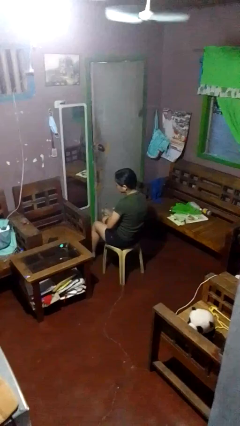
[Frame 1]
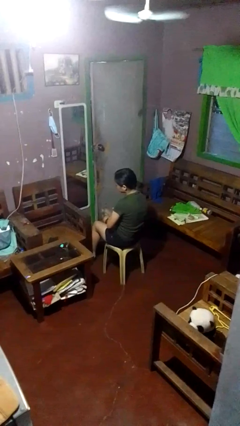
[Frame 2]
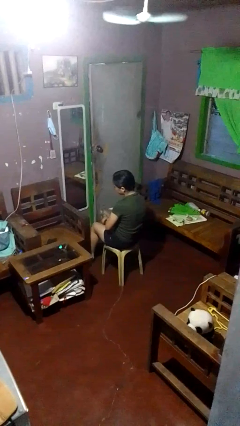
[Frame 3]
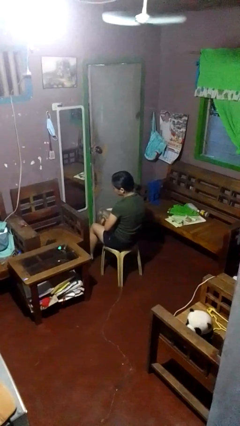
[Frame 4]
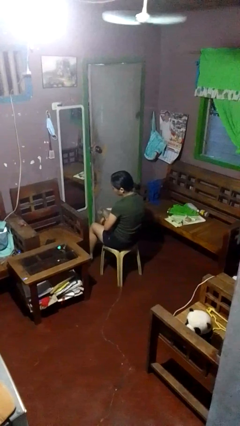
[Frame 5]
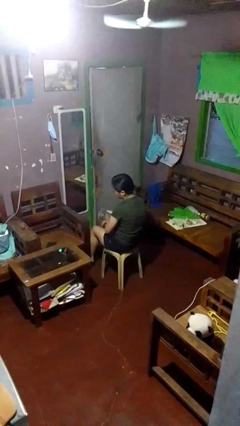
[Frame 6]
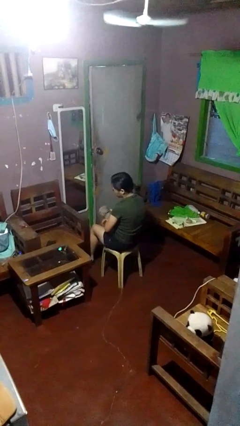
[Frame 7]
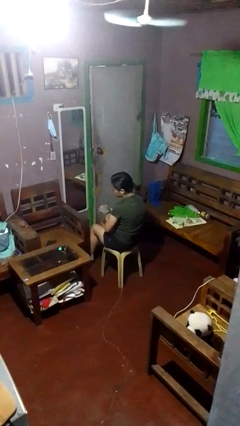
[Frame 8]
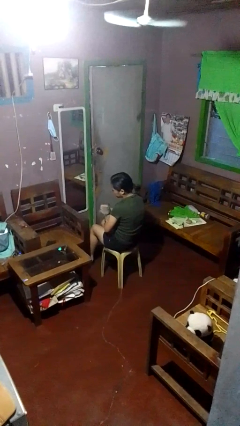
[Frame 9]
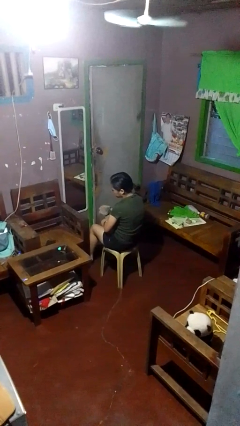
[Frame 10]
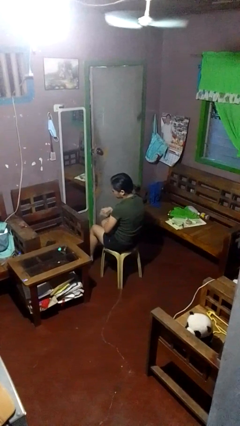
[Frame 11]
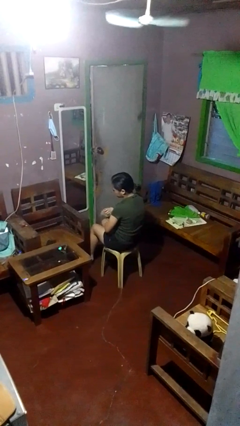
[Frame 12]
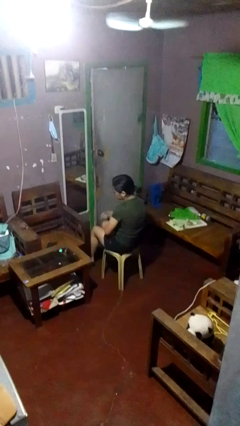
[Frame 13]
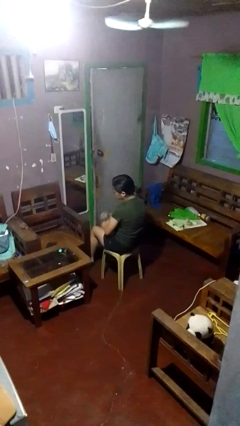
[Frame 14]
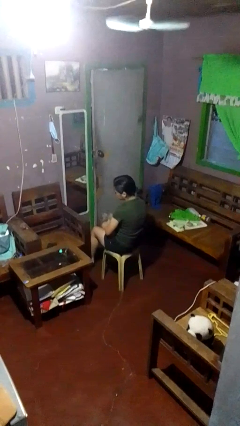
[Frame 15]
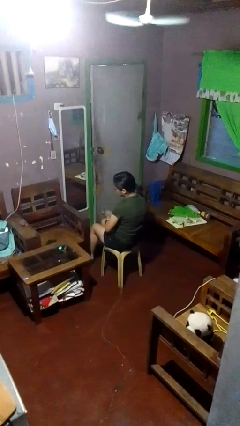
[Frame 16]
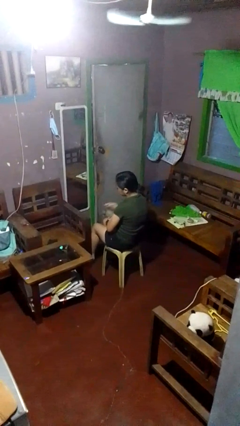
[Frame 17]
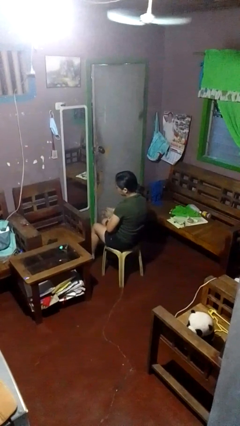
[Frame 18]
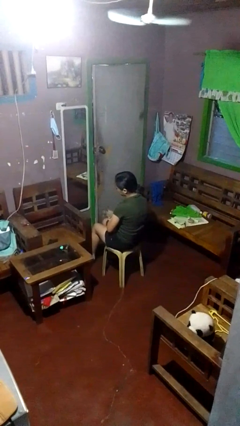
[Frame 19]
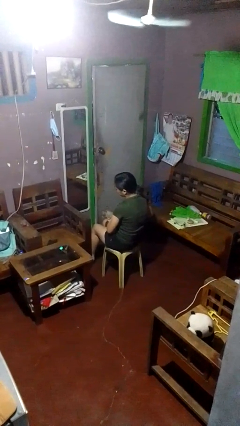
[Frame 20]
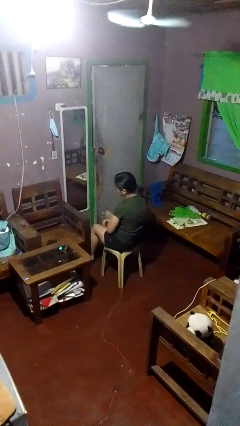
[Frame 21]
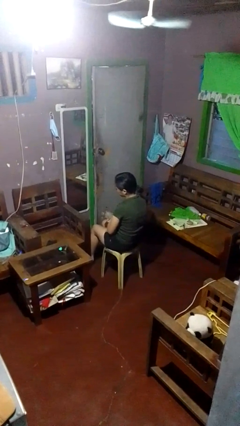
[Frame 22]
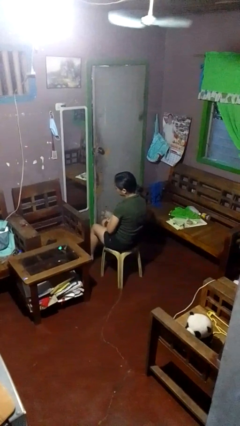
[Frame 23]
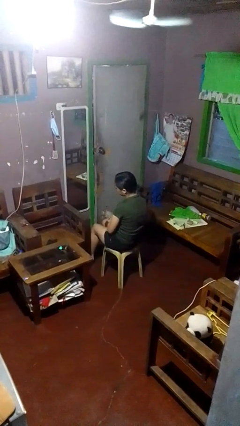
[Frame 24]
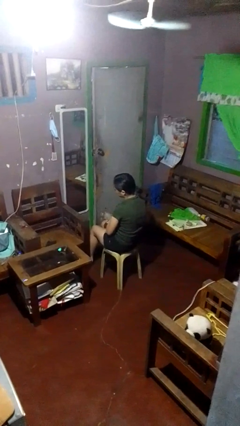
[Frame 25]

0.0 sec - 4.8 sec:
person pets cat

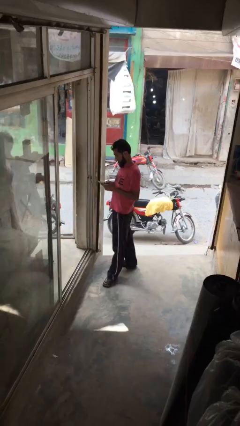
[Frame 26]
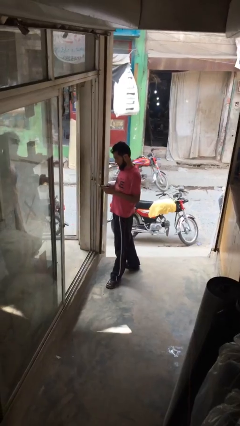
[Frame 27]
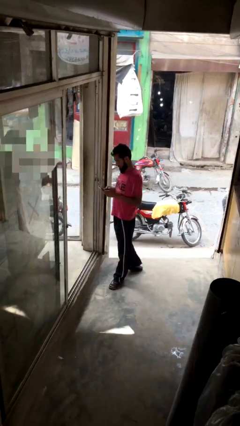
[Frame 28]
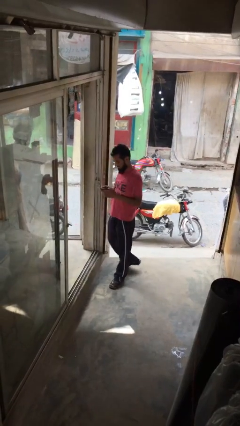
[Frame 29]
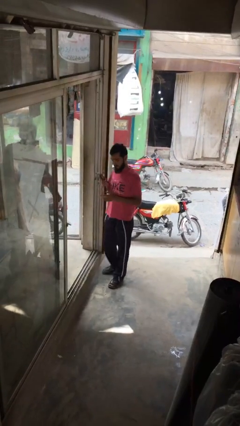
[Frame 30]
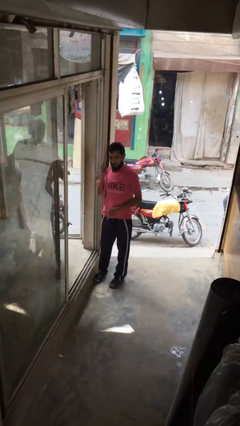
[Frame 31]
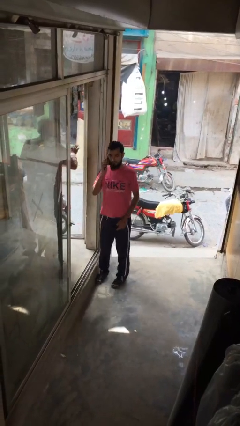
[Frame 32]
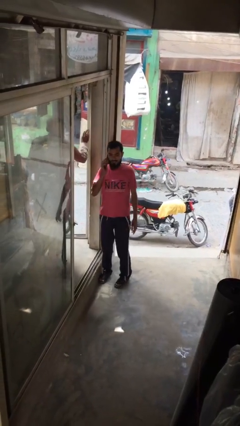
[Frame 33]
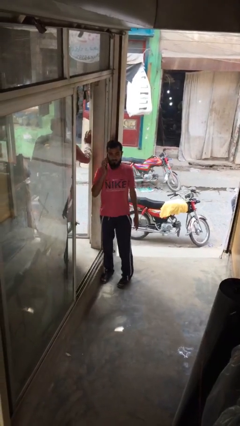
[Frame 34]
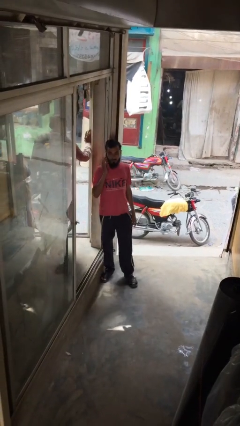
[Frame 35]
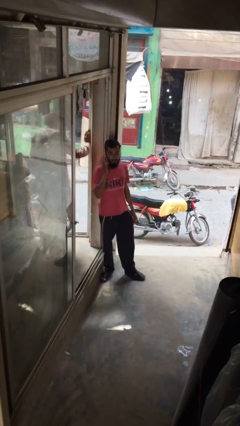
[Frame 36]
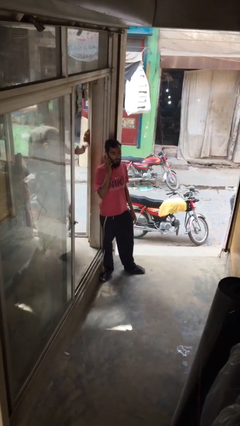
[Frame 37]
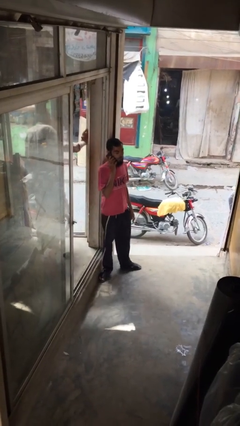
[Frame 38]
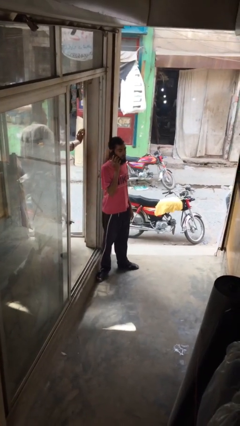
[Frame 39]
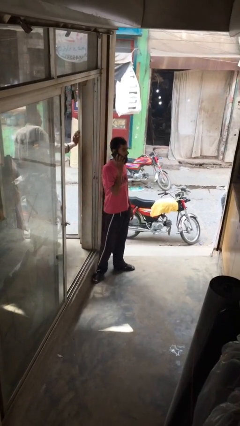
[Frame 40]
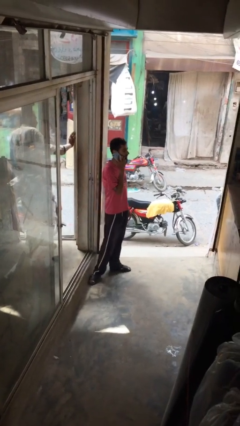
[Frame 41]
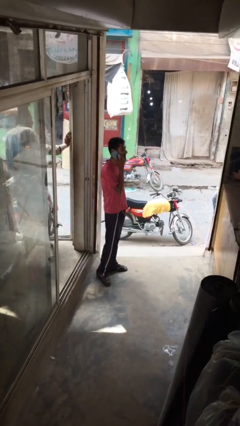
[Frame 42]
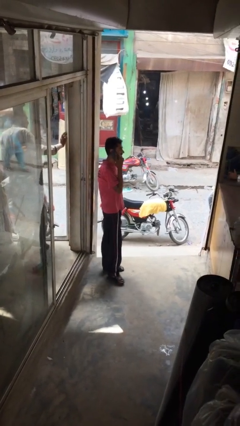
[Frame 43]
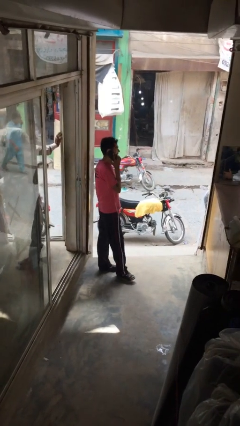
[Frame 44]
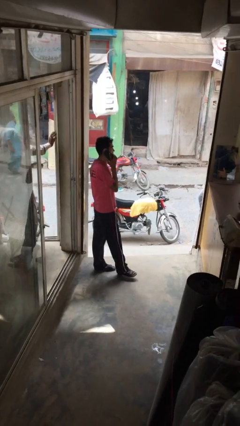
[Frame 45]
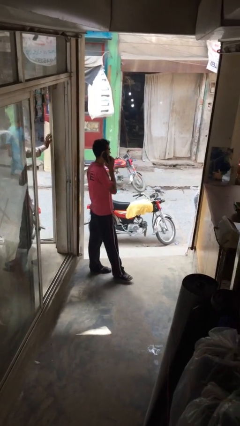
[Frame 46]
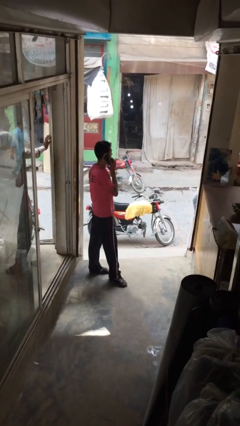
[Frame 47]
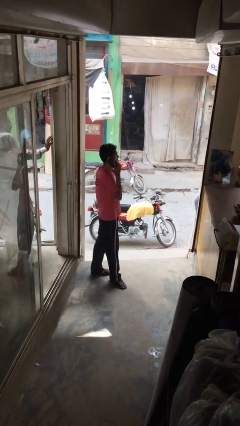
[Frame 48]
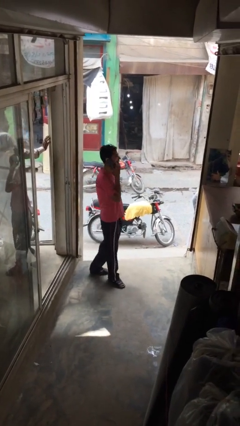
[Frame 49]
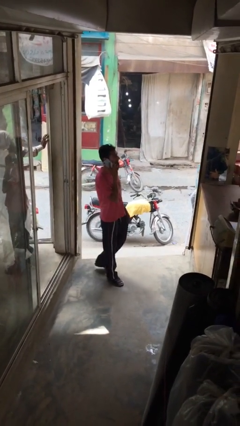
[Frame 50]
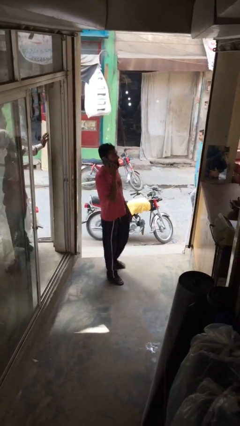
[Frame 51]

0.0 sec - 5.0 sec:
person talks on phone

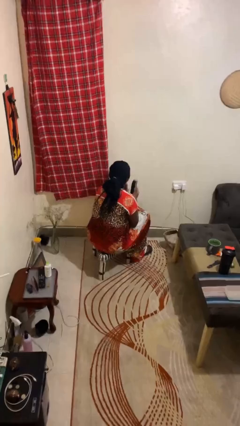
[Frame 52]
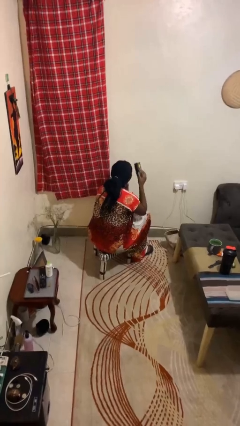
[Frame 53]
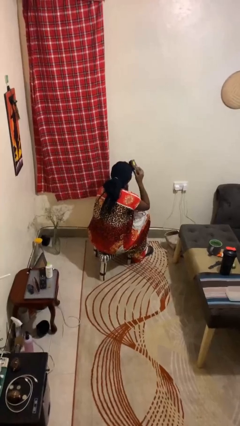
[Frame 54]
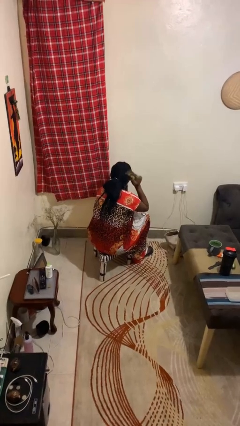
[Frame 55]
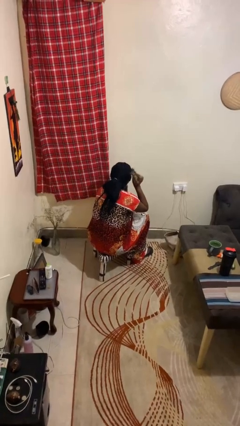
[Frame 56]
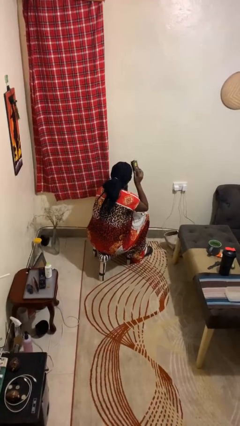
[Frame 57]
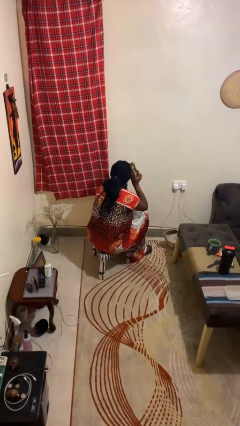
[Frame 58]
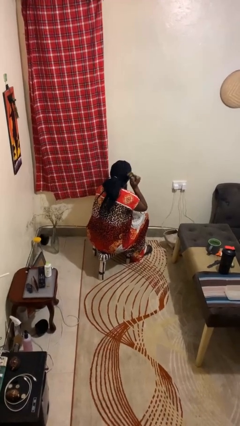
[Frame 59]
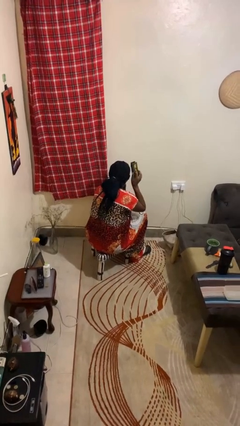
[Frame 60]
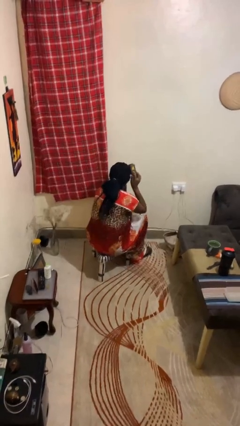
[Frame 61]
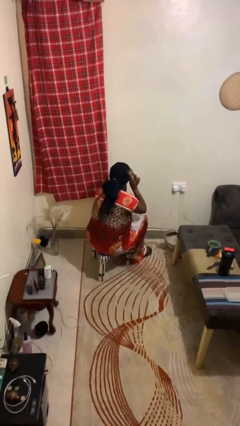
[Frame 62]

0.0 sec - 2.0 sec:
person brushes hair

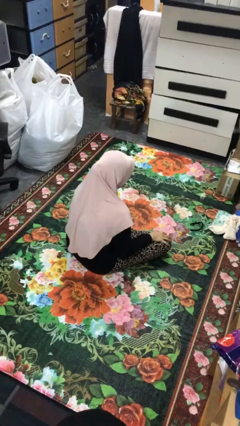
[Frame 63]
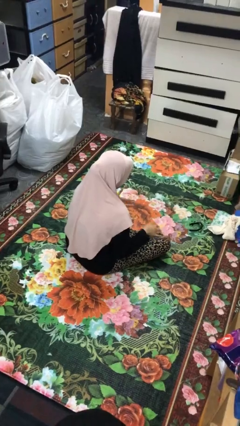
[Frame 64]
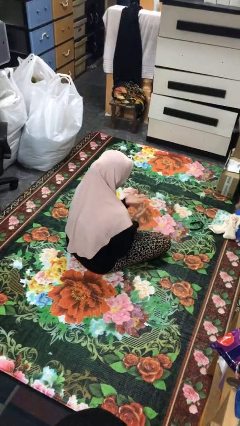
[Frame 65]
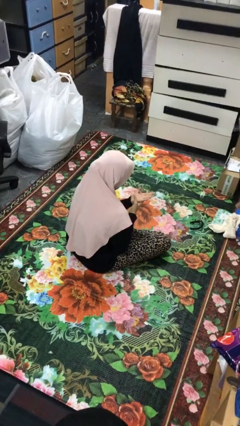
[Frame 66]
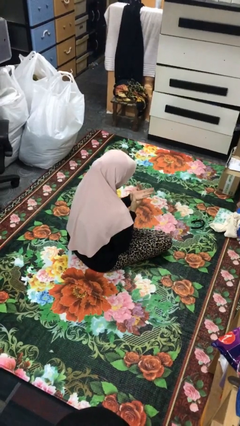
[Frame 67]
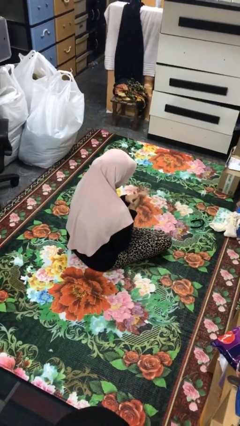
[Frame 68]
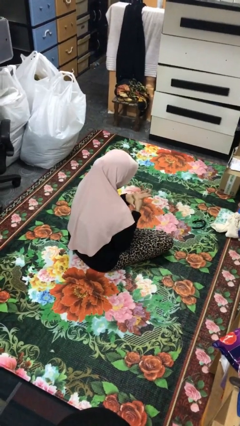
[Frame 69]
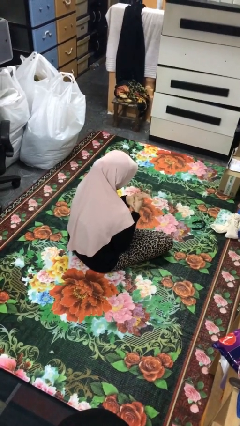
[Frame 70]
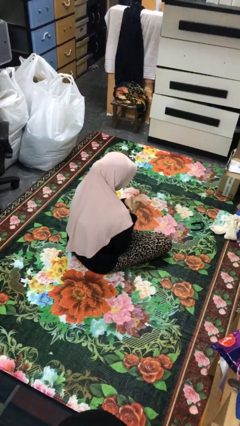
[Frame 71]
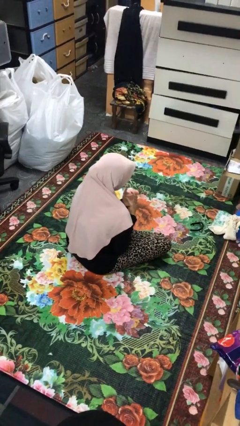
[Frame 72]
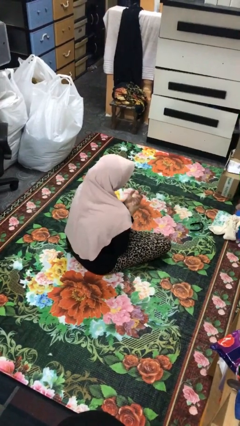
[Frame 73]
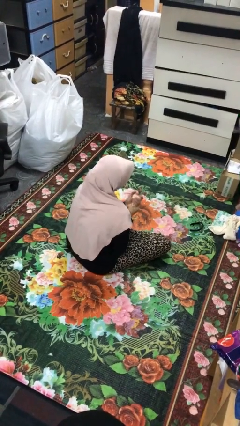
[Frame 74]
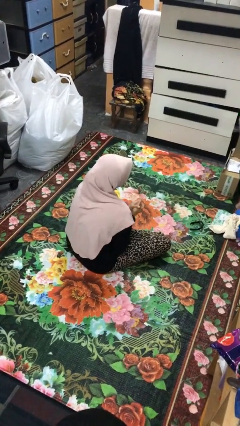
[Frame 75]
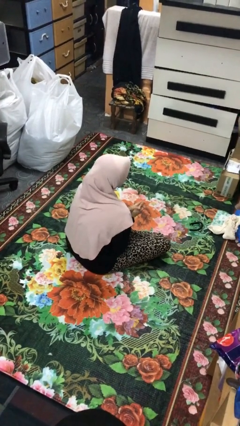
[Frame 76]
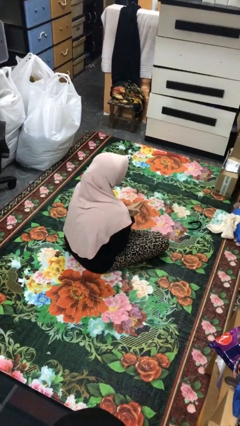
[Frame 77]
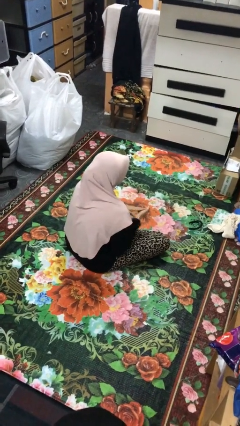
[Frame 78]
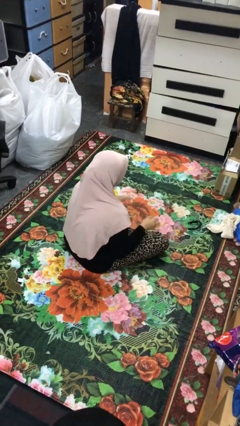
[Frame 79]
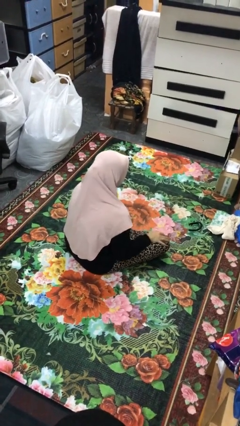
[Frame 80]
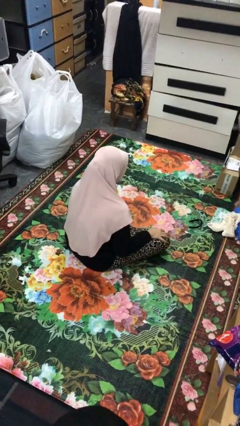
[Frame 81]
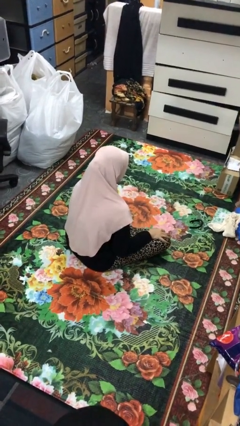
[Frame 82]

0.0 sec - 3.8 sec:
person looks at hands in lap

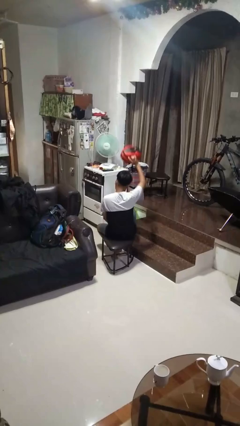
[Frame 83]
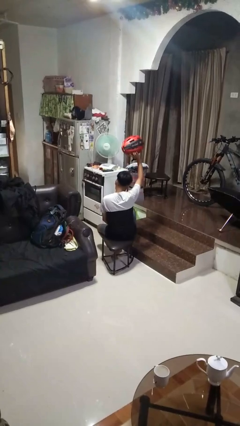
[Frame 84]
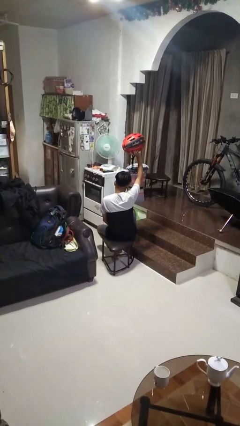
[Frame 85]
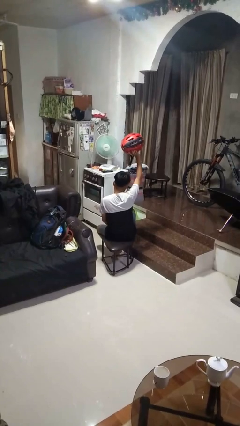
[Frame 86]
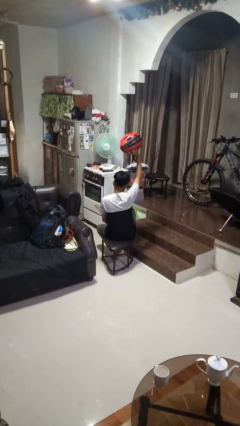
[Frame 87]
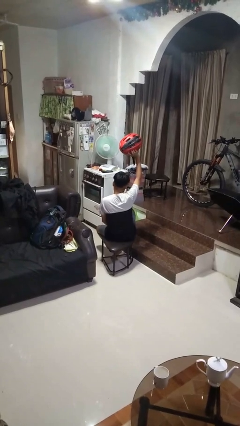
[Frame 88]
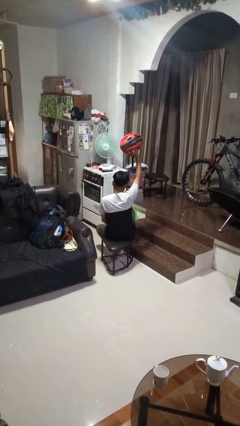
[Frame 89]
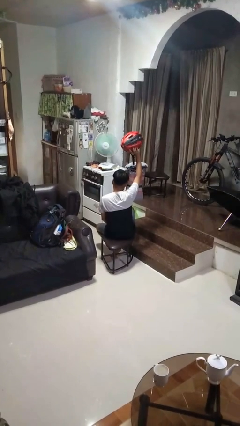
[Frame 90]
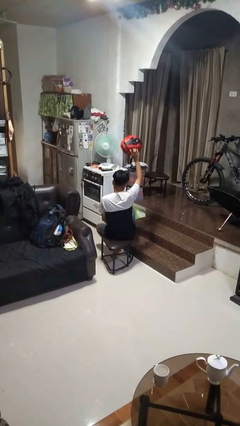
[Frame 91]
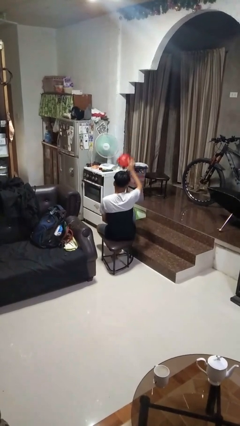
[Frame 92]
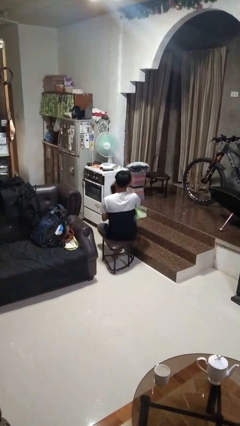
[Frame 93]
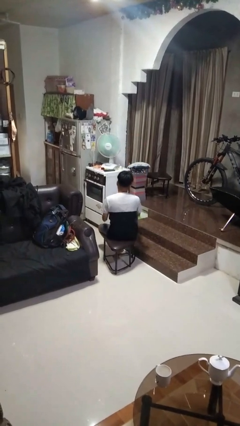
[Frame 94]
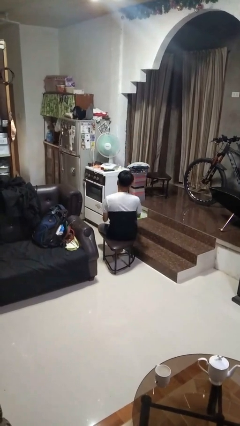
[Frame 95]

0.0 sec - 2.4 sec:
person holds object above head
